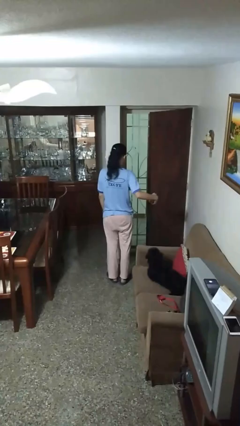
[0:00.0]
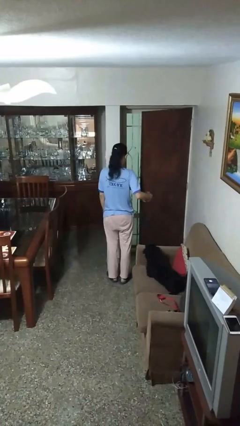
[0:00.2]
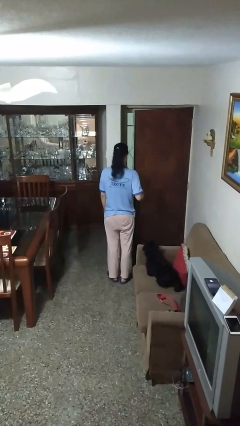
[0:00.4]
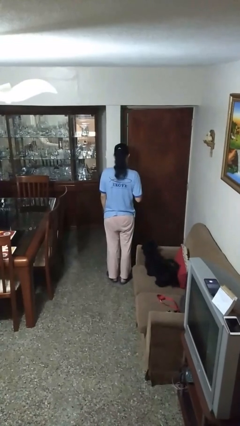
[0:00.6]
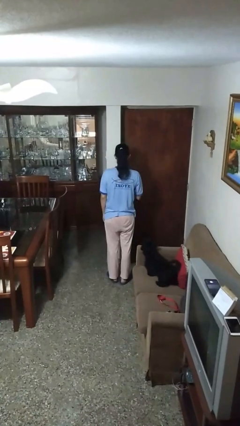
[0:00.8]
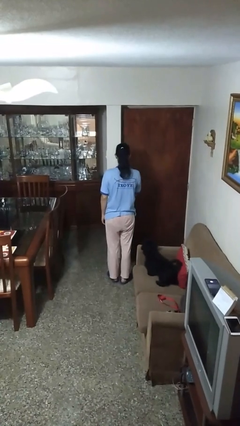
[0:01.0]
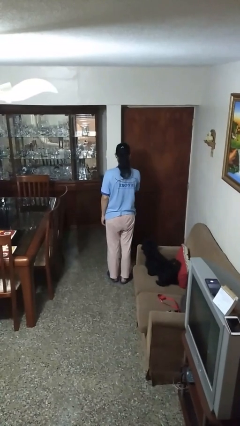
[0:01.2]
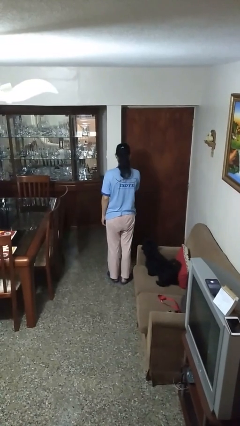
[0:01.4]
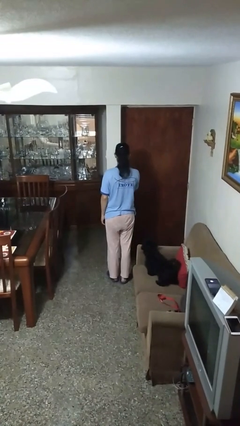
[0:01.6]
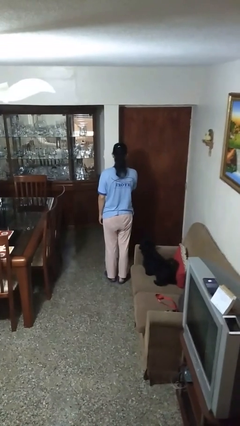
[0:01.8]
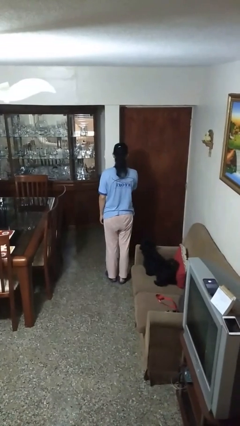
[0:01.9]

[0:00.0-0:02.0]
person closes facility door

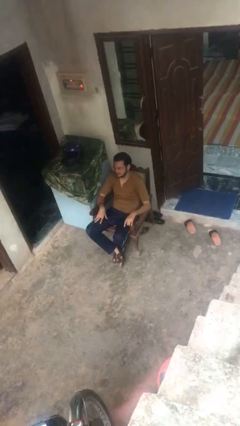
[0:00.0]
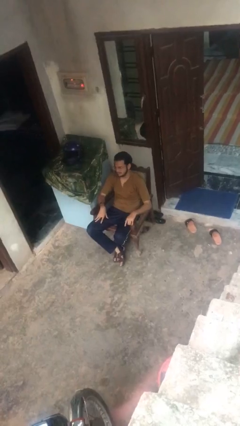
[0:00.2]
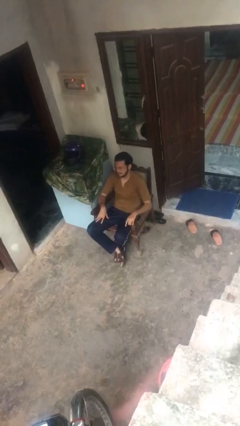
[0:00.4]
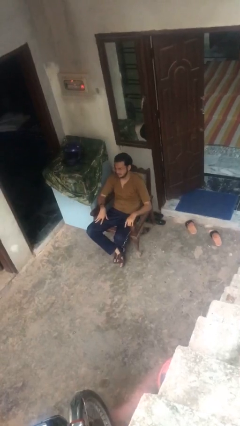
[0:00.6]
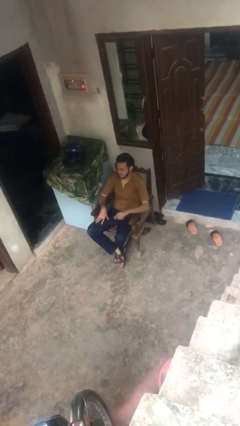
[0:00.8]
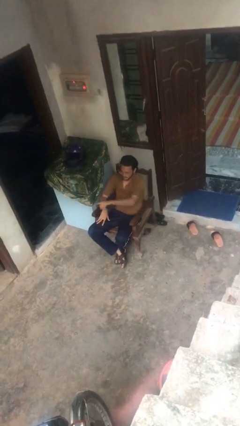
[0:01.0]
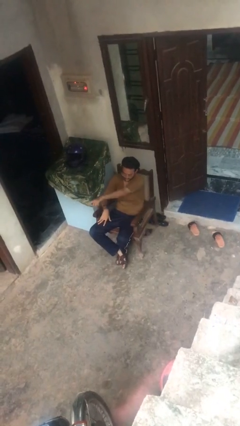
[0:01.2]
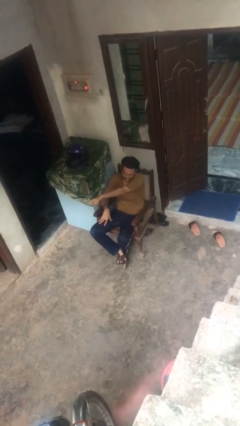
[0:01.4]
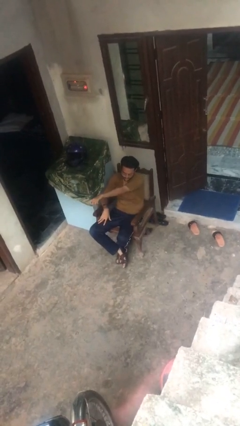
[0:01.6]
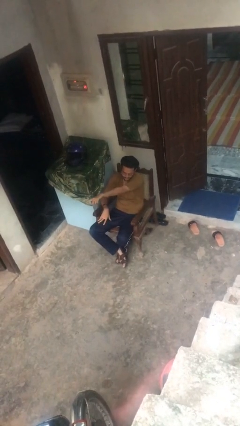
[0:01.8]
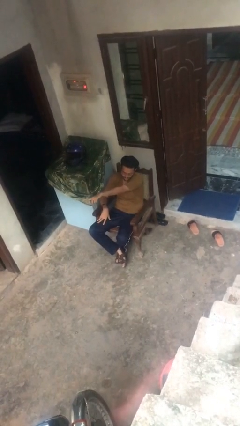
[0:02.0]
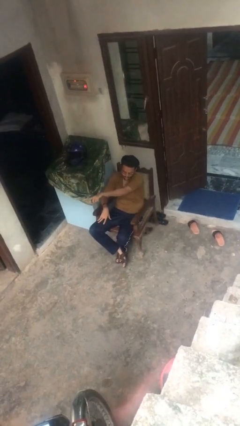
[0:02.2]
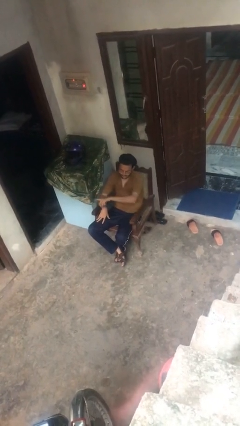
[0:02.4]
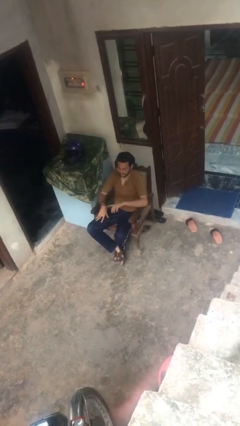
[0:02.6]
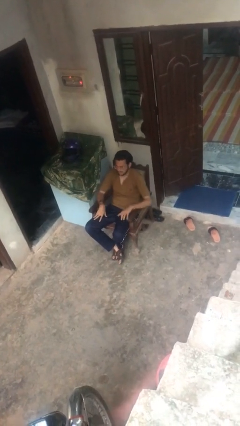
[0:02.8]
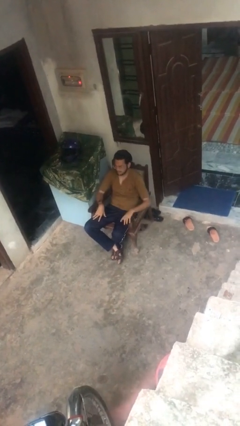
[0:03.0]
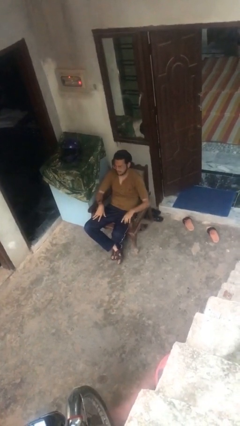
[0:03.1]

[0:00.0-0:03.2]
person points at person

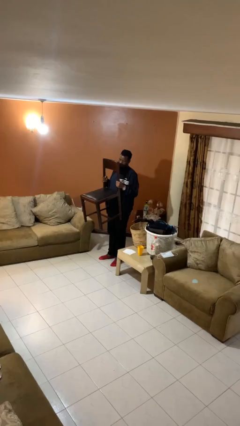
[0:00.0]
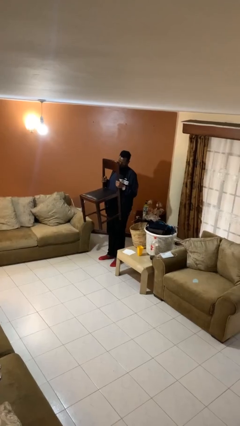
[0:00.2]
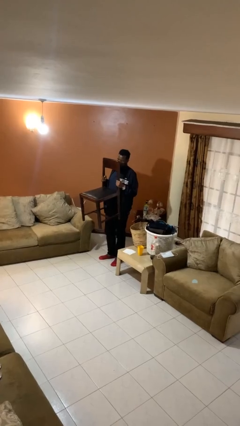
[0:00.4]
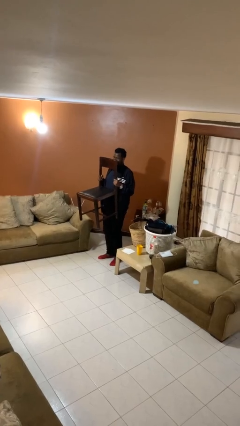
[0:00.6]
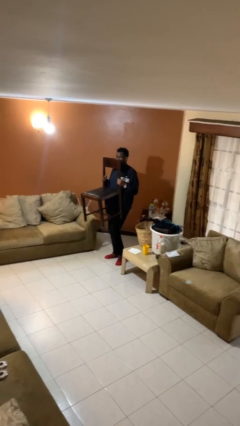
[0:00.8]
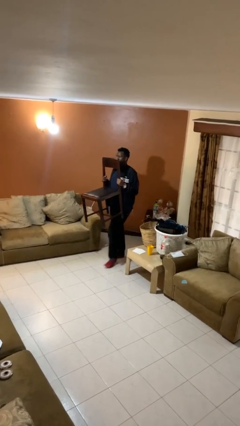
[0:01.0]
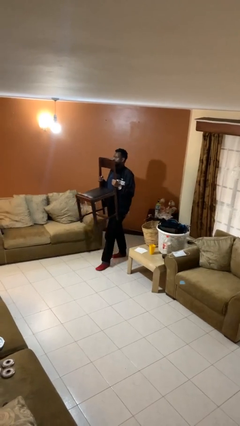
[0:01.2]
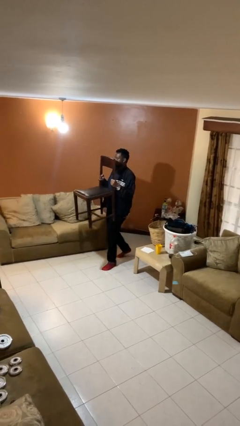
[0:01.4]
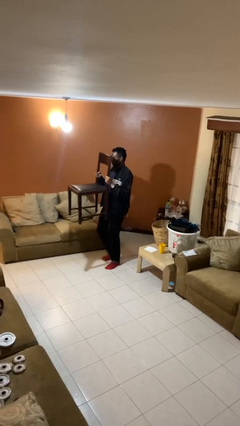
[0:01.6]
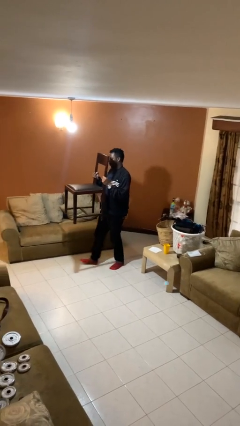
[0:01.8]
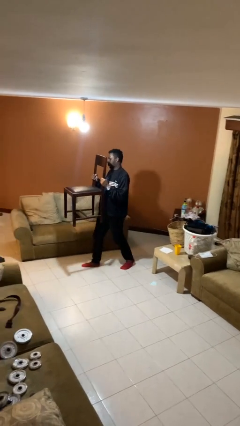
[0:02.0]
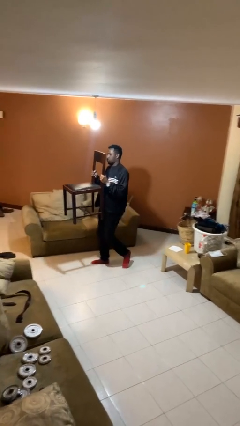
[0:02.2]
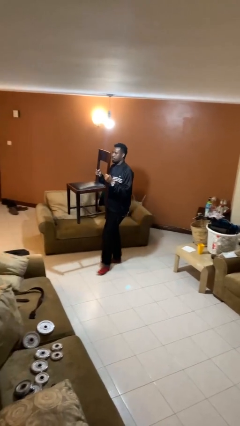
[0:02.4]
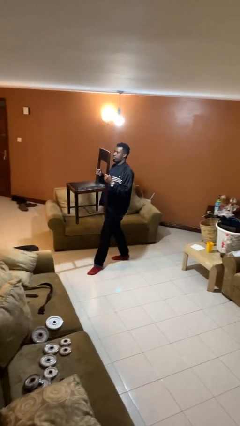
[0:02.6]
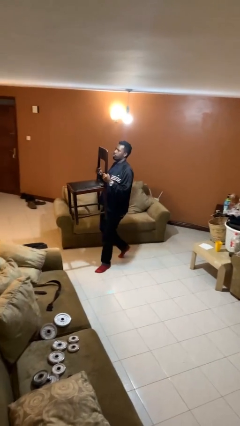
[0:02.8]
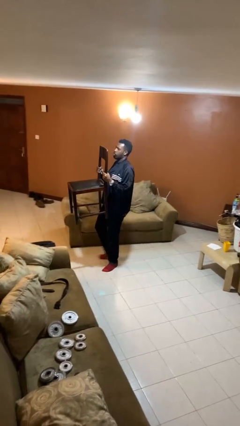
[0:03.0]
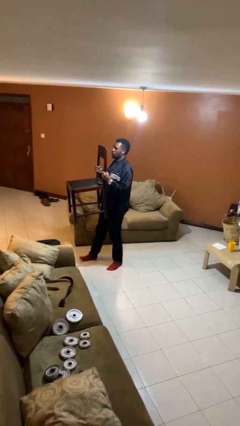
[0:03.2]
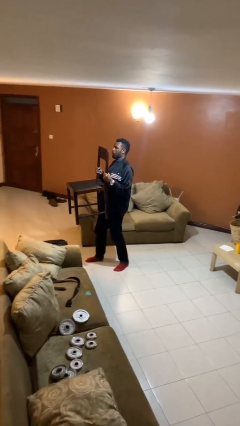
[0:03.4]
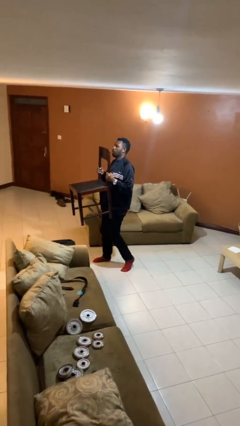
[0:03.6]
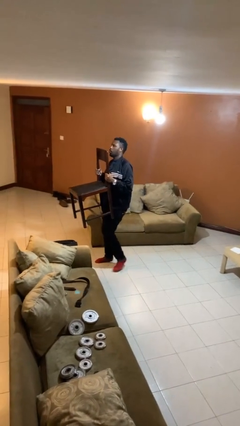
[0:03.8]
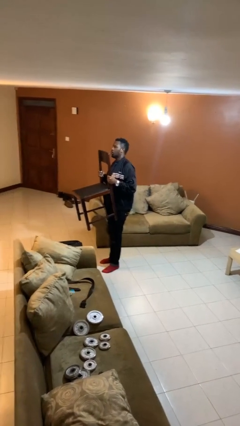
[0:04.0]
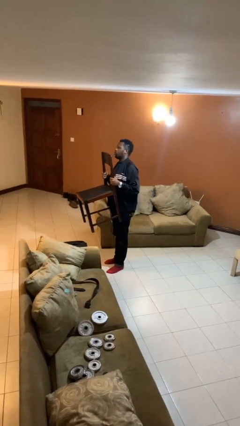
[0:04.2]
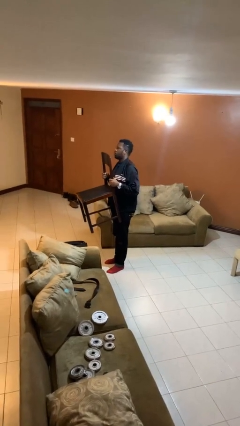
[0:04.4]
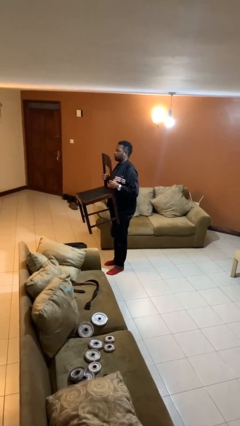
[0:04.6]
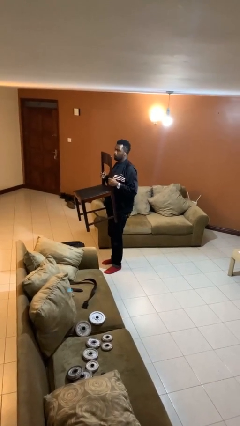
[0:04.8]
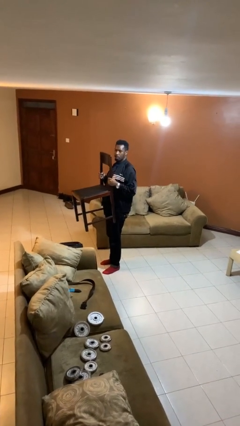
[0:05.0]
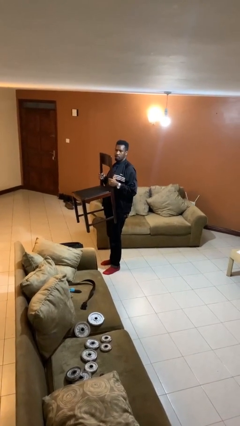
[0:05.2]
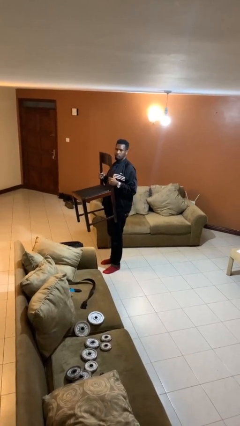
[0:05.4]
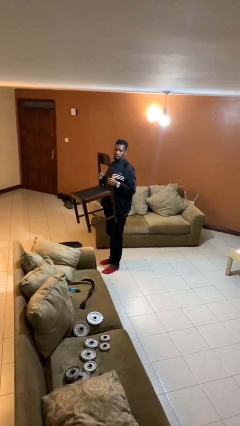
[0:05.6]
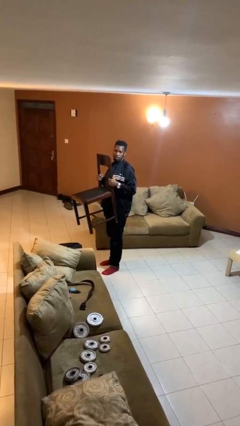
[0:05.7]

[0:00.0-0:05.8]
person carries furniture

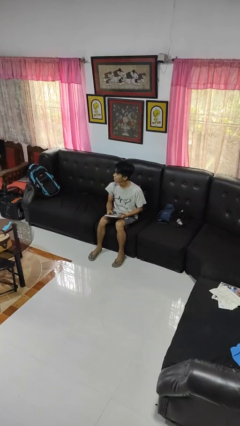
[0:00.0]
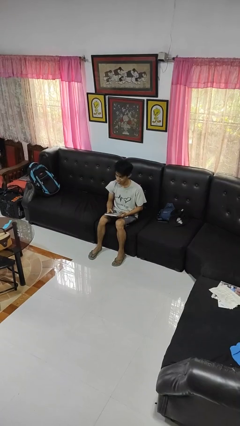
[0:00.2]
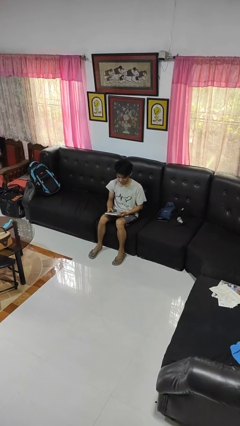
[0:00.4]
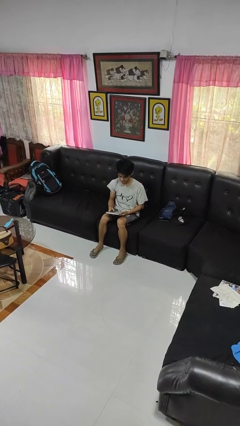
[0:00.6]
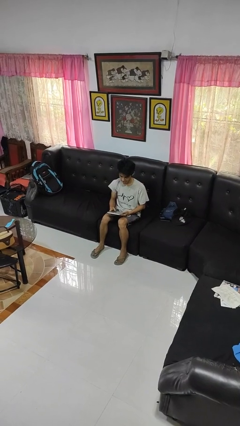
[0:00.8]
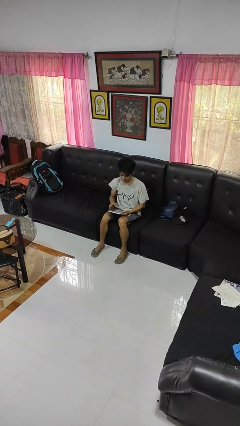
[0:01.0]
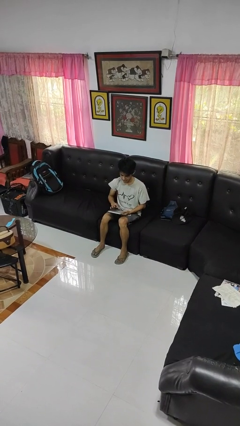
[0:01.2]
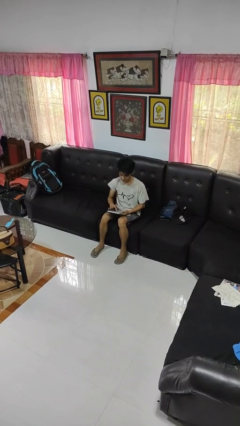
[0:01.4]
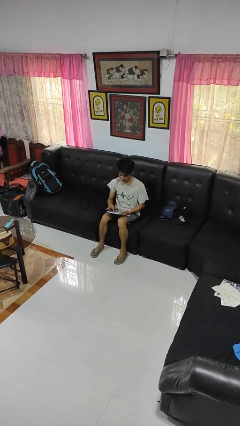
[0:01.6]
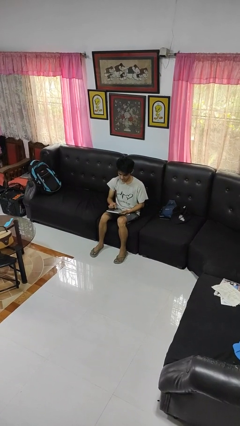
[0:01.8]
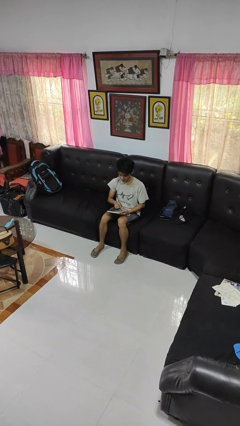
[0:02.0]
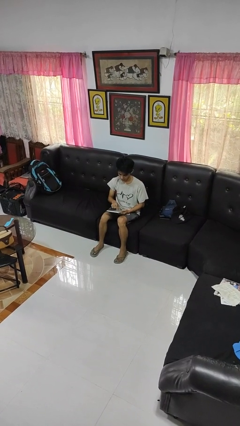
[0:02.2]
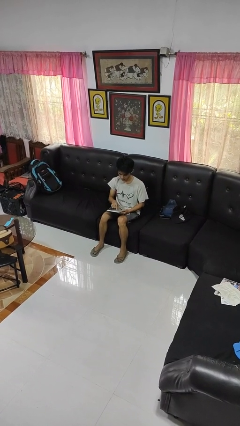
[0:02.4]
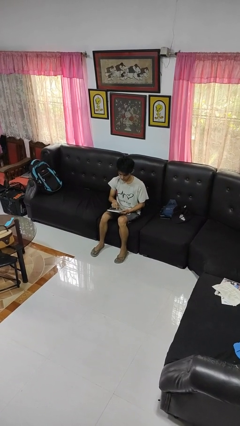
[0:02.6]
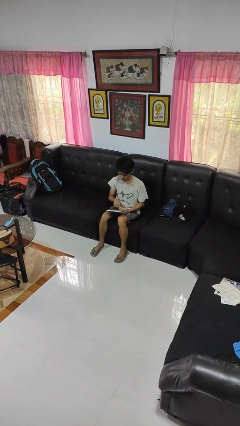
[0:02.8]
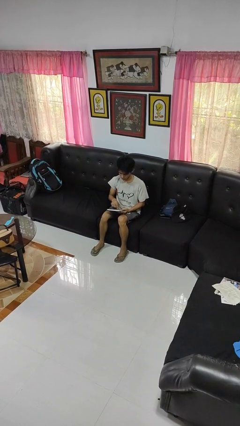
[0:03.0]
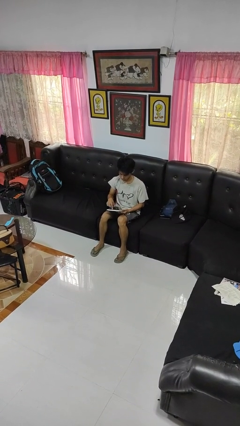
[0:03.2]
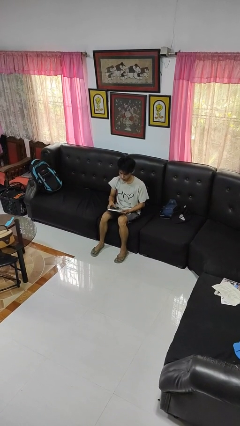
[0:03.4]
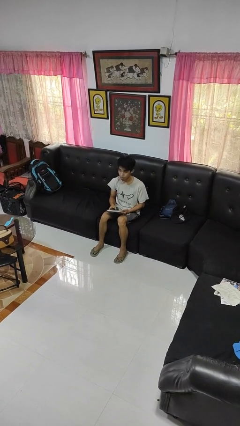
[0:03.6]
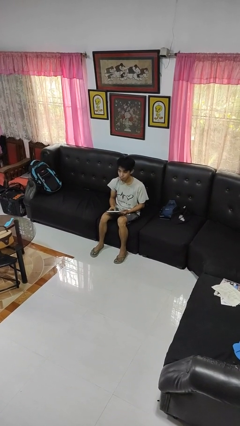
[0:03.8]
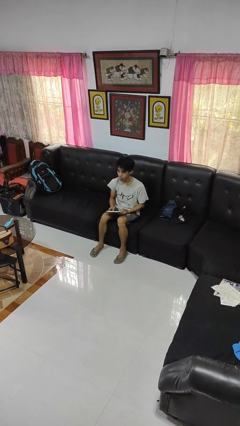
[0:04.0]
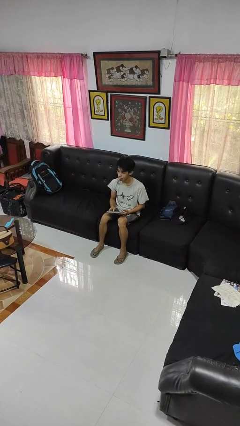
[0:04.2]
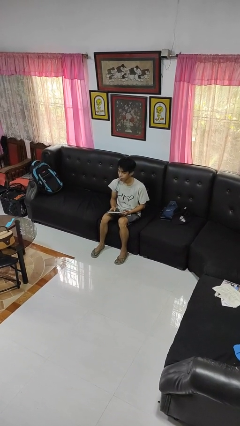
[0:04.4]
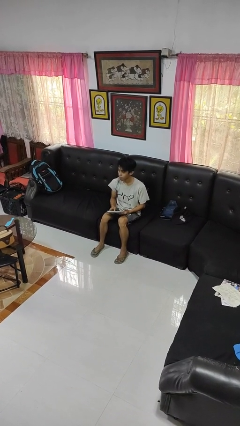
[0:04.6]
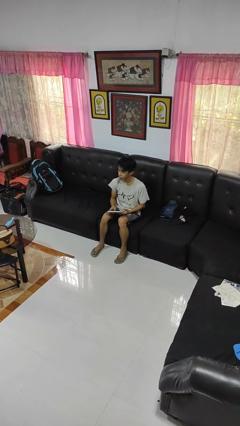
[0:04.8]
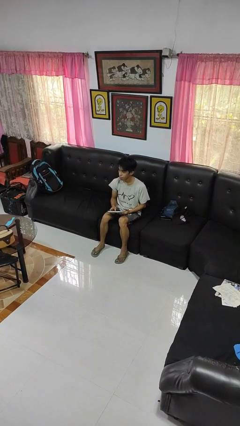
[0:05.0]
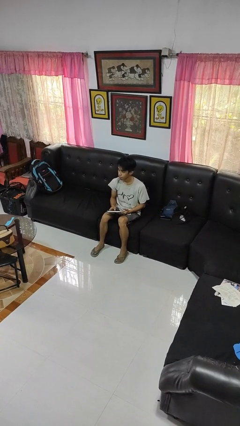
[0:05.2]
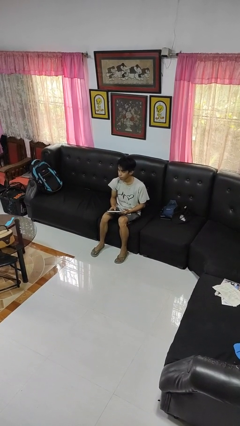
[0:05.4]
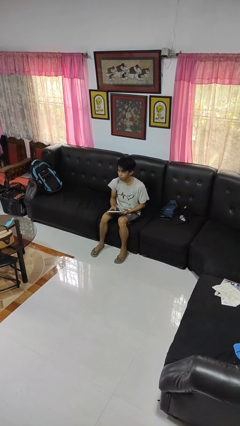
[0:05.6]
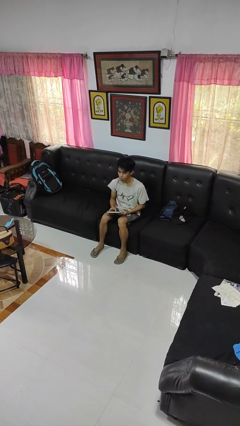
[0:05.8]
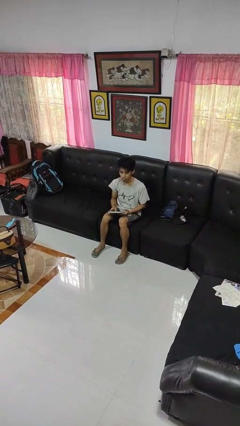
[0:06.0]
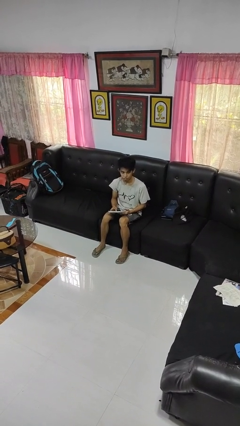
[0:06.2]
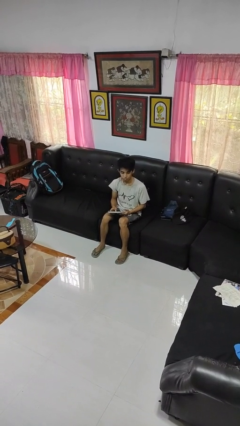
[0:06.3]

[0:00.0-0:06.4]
person interacts with tablet

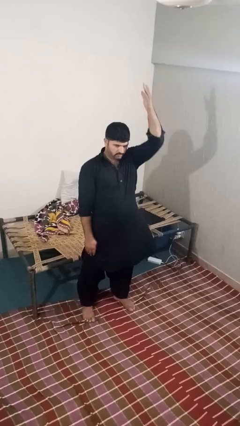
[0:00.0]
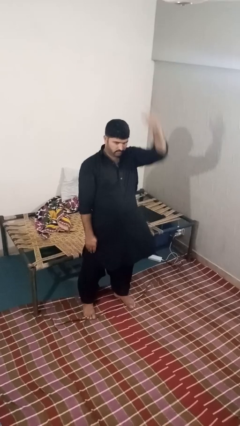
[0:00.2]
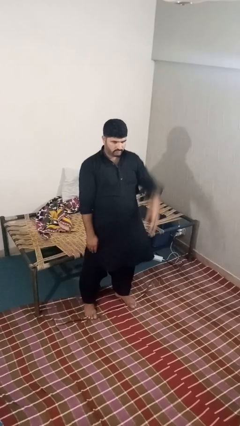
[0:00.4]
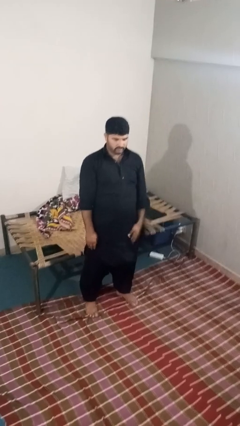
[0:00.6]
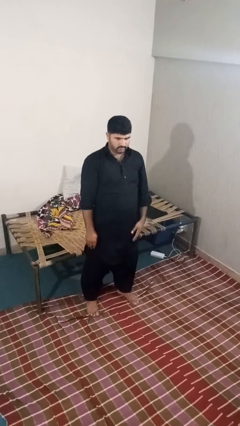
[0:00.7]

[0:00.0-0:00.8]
person gestures swipe down
